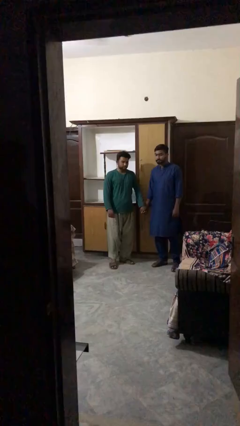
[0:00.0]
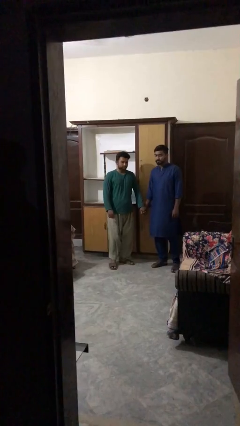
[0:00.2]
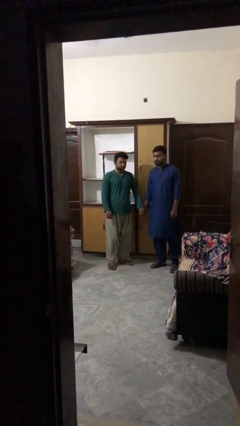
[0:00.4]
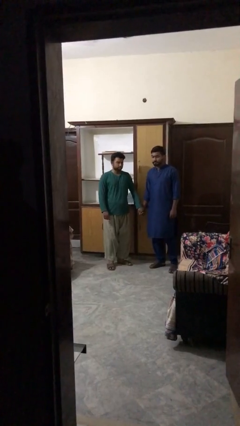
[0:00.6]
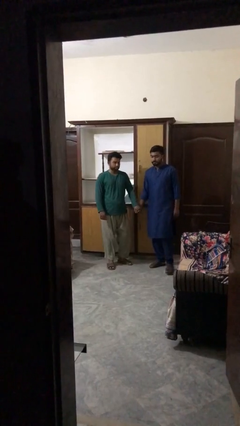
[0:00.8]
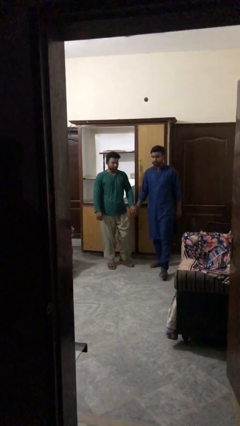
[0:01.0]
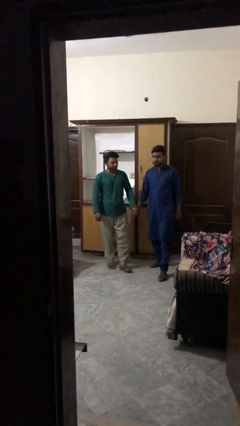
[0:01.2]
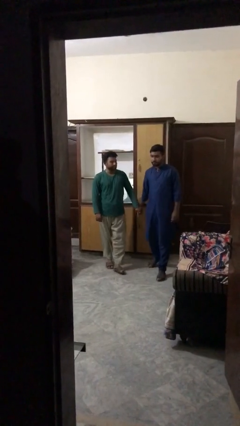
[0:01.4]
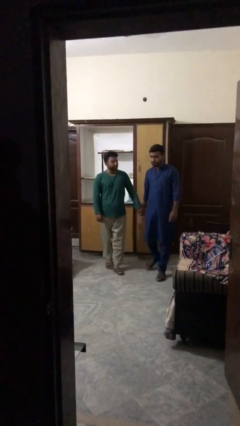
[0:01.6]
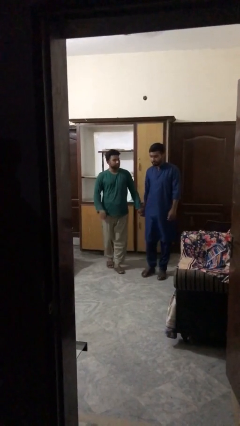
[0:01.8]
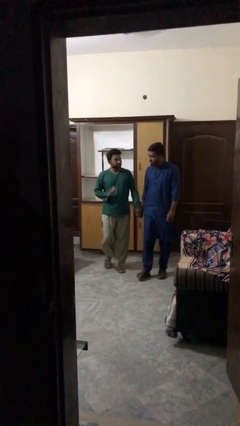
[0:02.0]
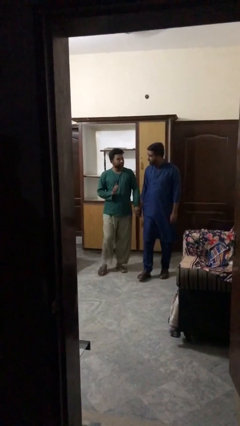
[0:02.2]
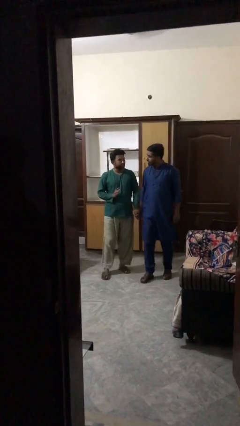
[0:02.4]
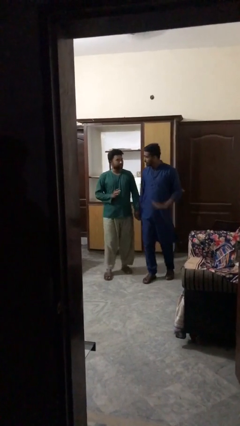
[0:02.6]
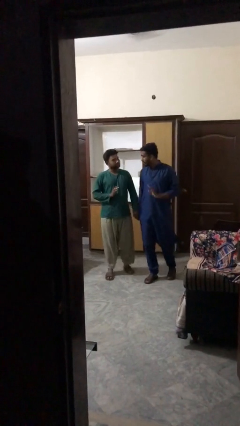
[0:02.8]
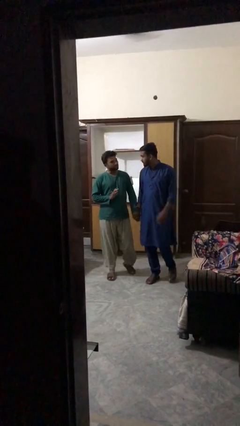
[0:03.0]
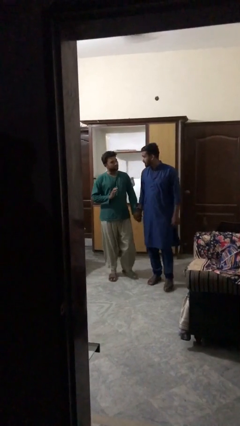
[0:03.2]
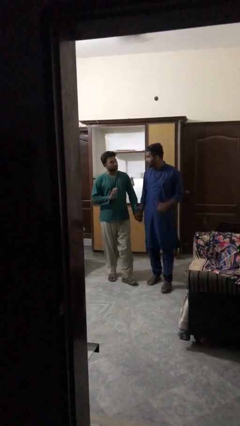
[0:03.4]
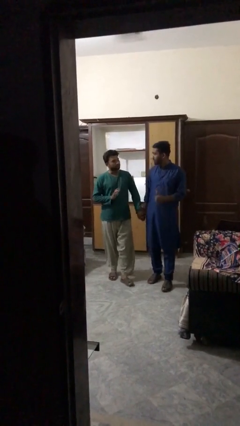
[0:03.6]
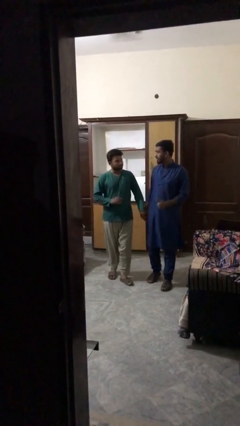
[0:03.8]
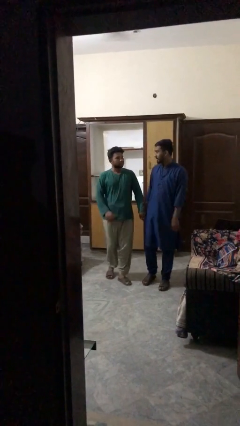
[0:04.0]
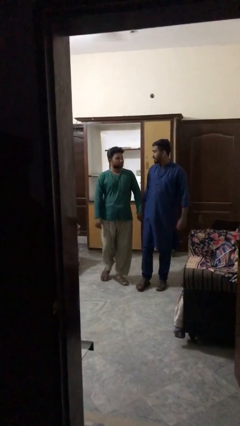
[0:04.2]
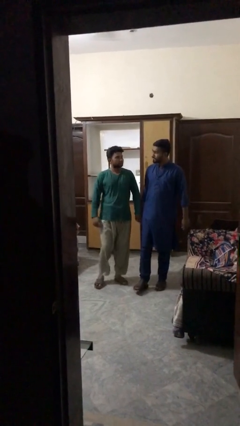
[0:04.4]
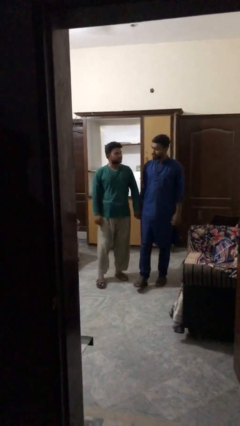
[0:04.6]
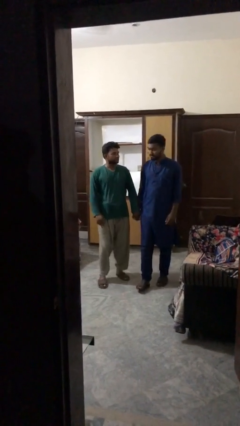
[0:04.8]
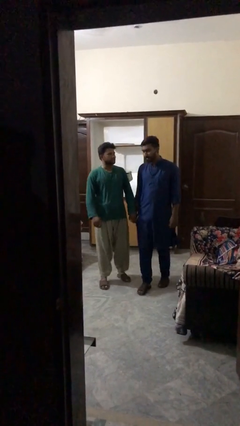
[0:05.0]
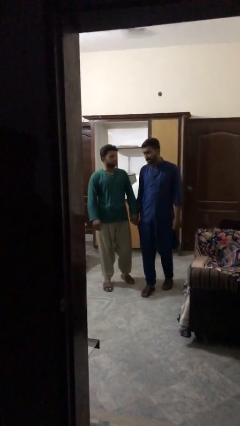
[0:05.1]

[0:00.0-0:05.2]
person holds hand

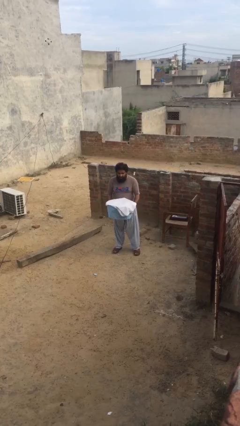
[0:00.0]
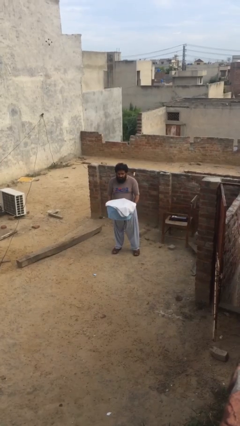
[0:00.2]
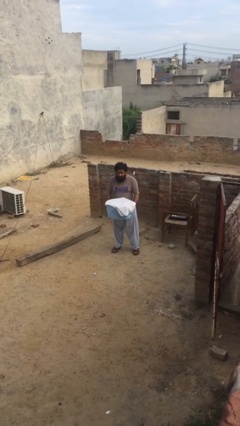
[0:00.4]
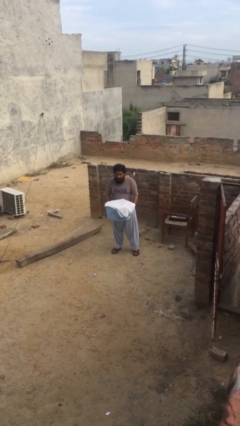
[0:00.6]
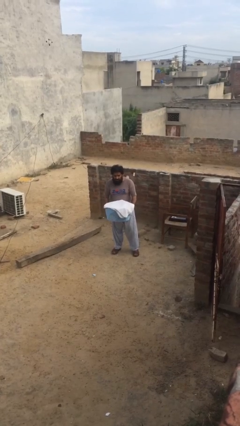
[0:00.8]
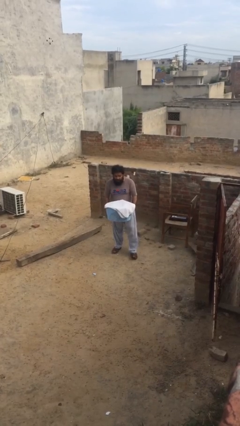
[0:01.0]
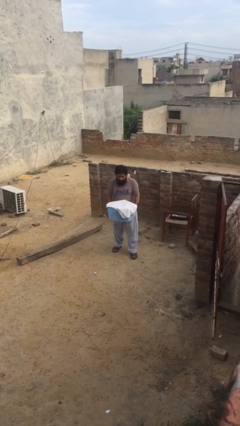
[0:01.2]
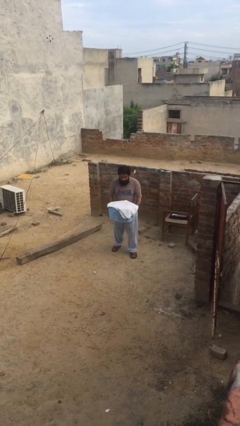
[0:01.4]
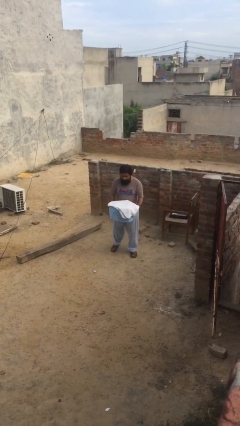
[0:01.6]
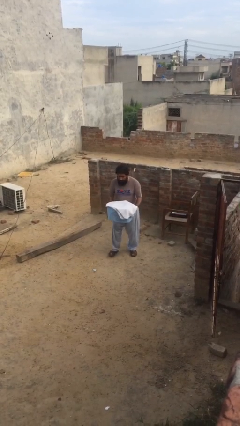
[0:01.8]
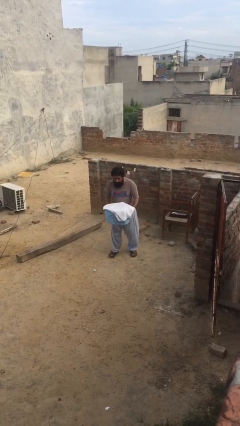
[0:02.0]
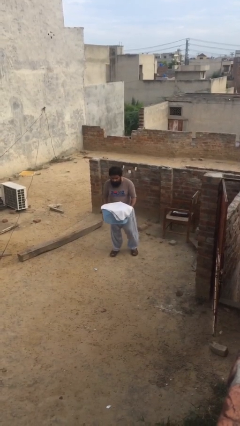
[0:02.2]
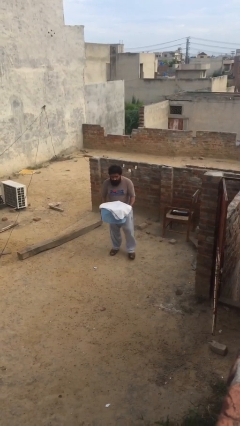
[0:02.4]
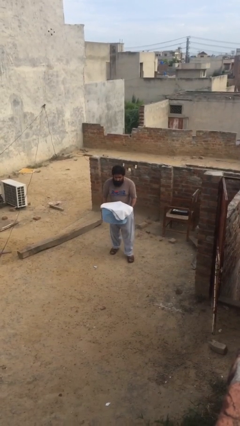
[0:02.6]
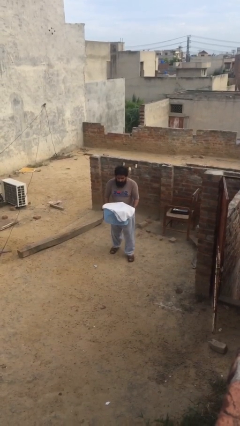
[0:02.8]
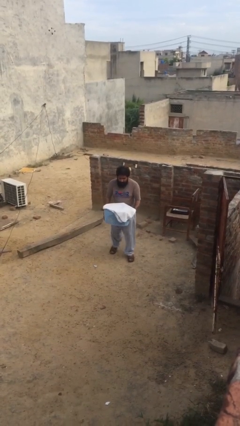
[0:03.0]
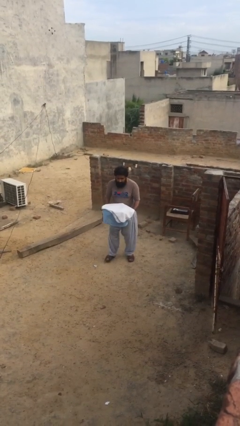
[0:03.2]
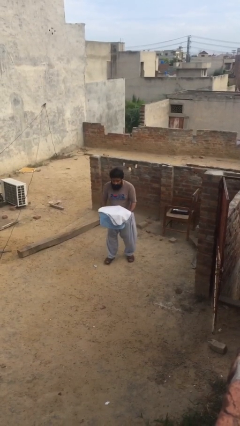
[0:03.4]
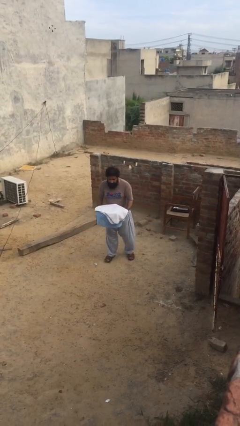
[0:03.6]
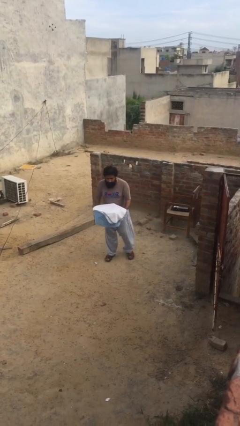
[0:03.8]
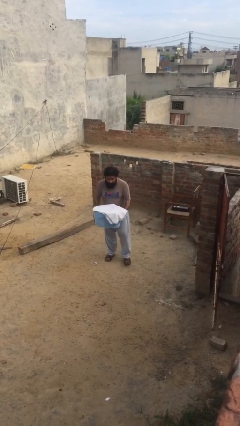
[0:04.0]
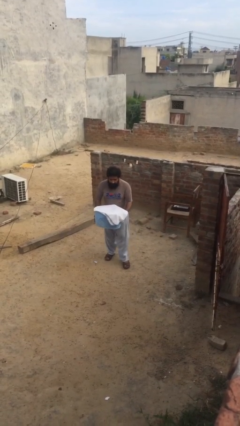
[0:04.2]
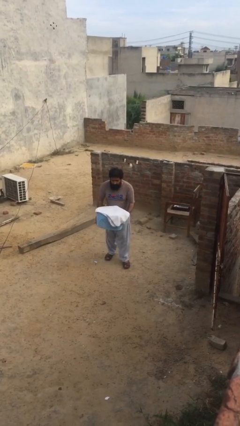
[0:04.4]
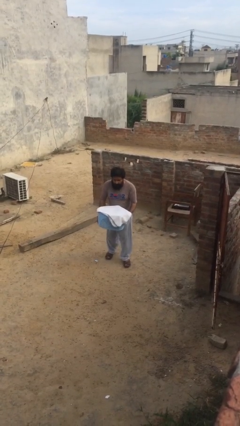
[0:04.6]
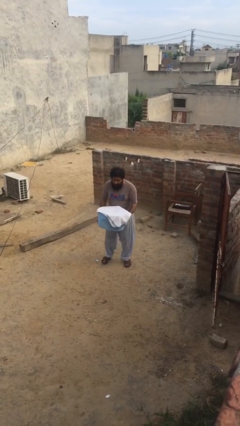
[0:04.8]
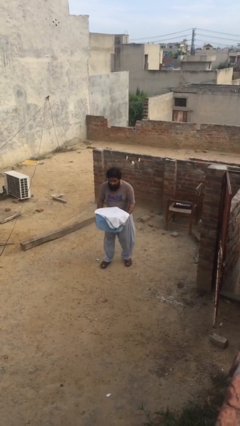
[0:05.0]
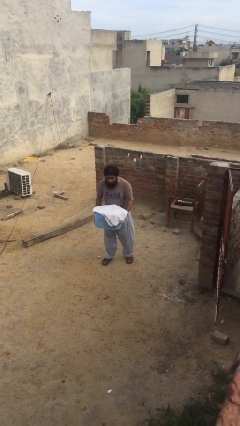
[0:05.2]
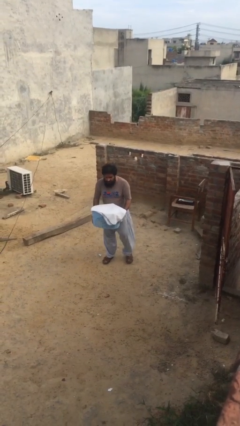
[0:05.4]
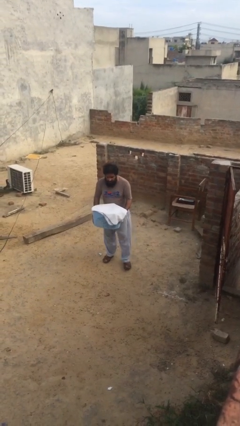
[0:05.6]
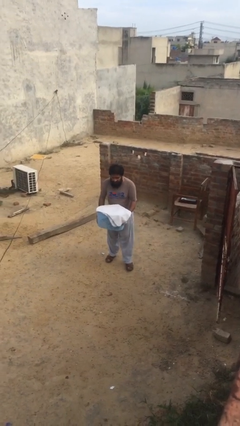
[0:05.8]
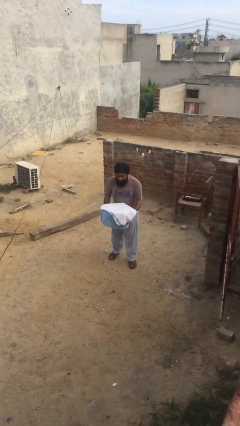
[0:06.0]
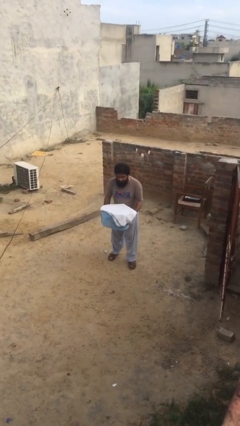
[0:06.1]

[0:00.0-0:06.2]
person carries heavy object

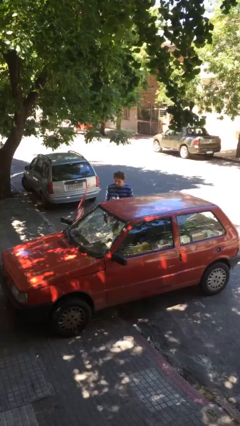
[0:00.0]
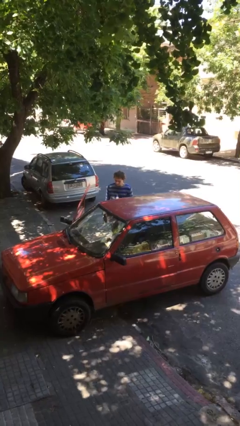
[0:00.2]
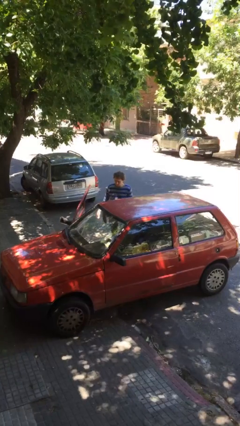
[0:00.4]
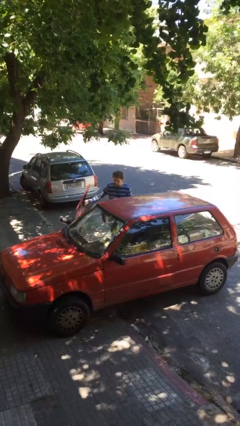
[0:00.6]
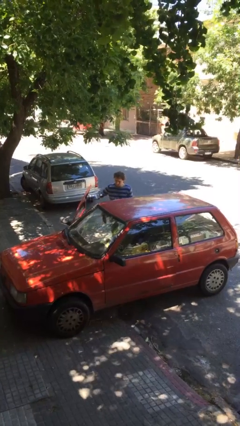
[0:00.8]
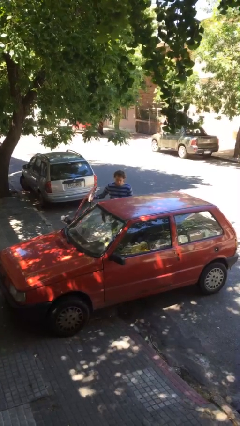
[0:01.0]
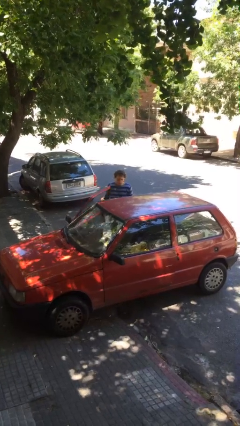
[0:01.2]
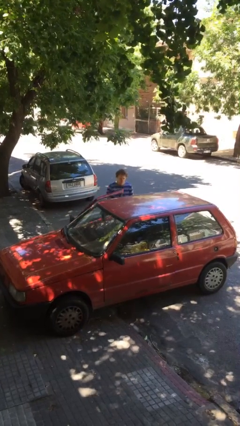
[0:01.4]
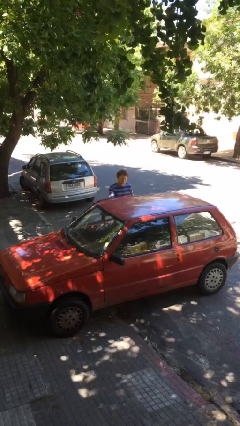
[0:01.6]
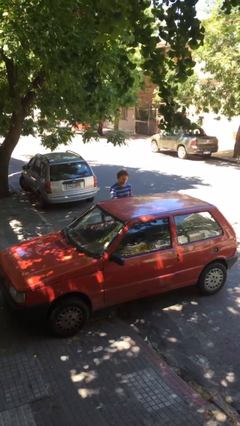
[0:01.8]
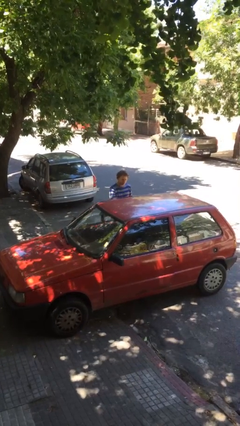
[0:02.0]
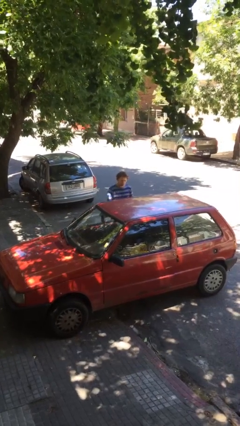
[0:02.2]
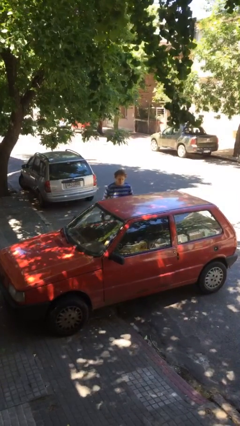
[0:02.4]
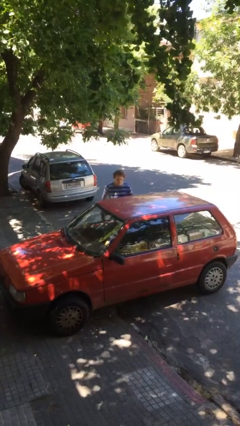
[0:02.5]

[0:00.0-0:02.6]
person closes car door

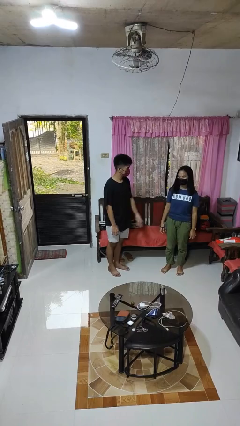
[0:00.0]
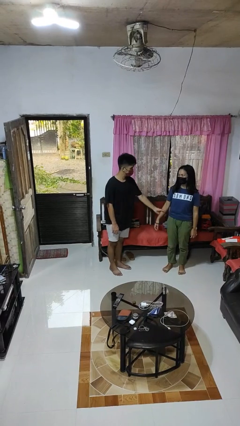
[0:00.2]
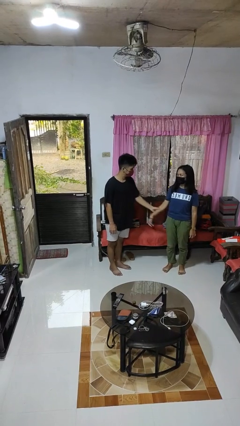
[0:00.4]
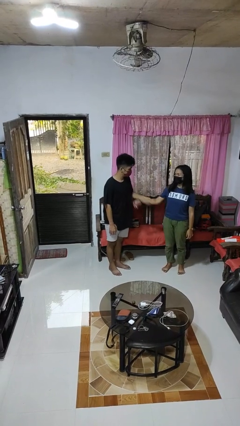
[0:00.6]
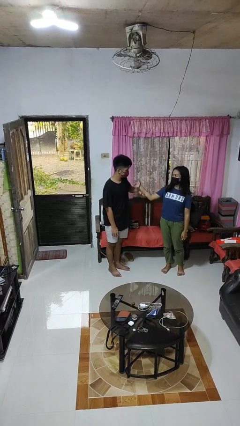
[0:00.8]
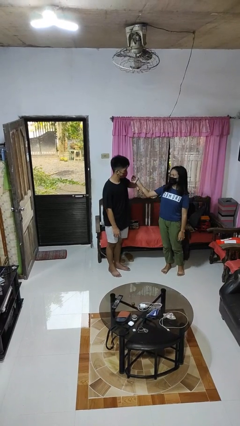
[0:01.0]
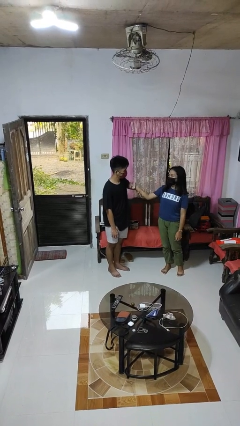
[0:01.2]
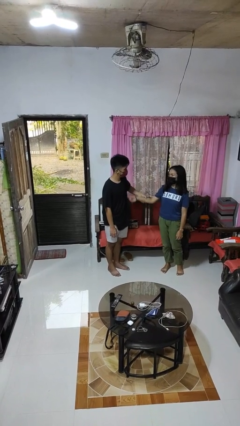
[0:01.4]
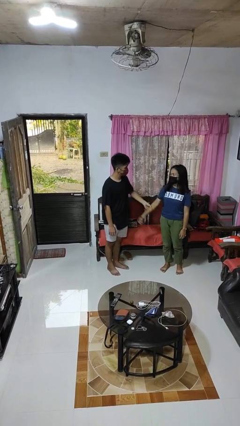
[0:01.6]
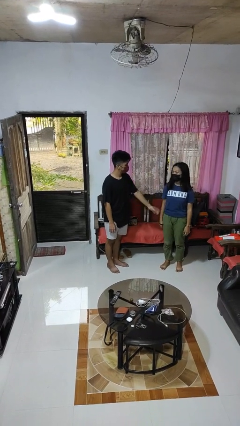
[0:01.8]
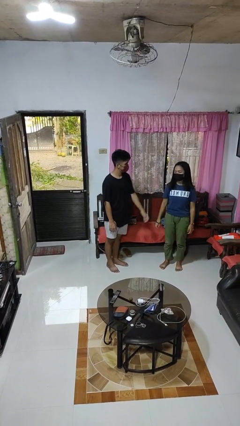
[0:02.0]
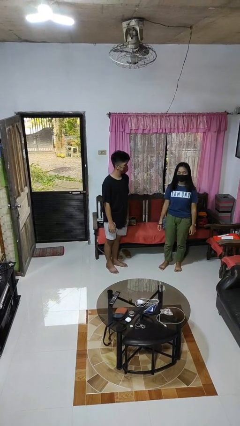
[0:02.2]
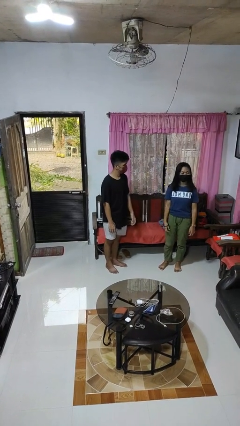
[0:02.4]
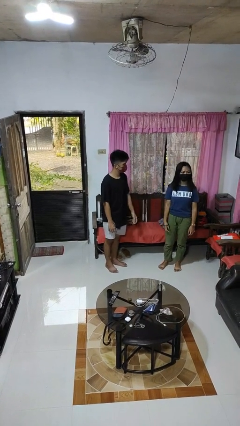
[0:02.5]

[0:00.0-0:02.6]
person grabs person by forearm

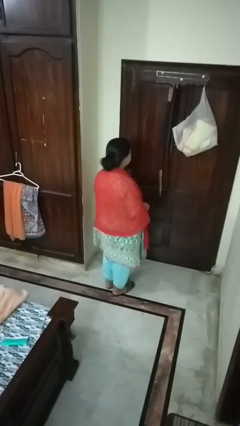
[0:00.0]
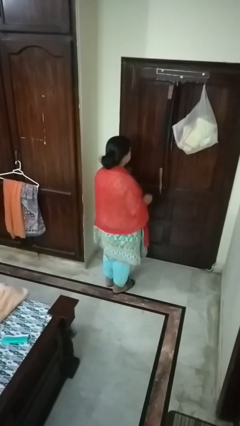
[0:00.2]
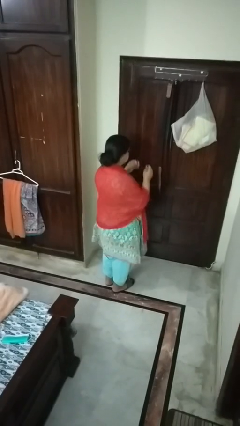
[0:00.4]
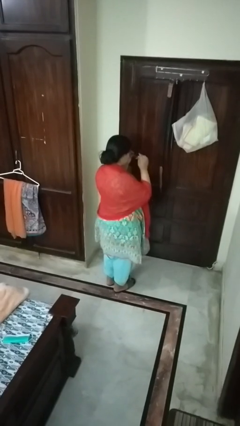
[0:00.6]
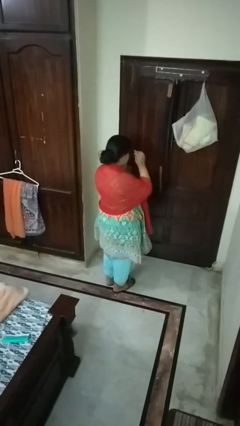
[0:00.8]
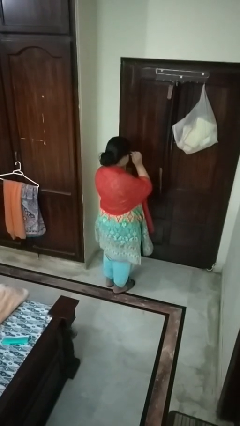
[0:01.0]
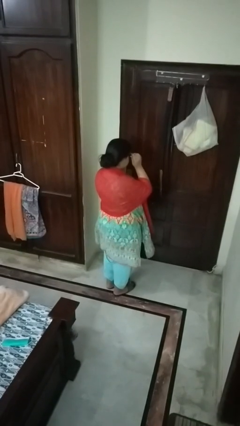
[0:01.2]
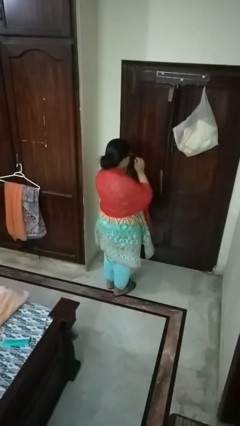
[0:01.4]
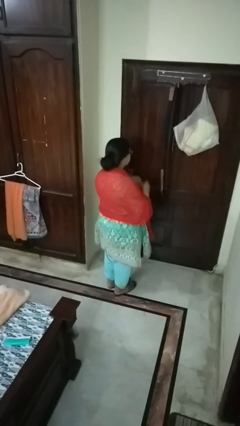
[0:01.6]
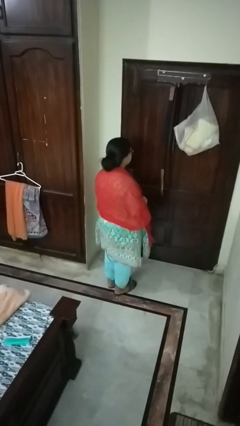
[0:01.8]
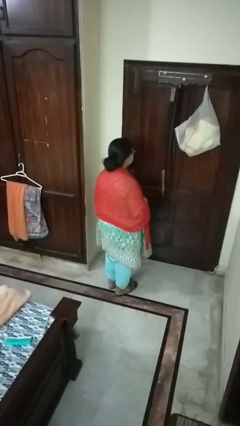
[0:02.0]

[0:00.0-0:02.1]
person puts on glasses
